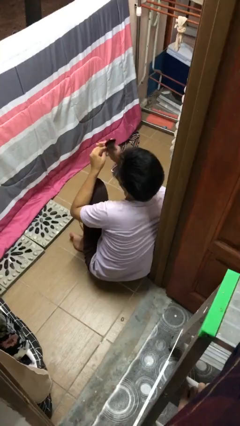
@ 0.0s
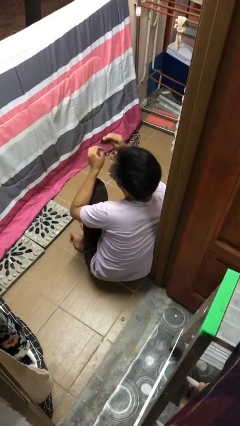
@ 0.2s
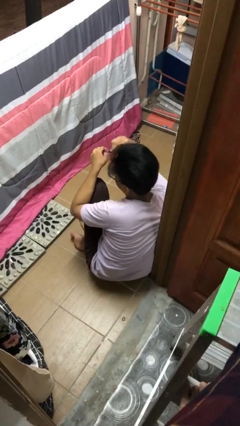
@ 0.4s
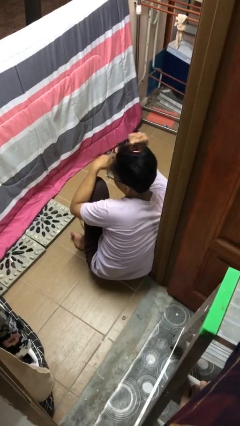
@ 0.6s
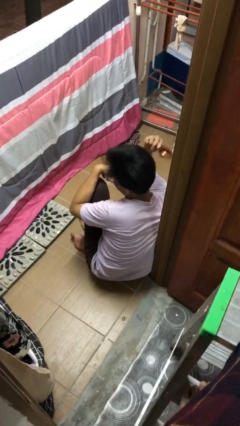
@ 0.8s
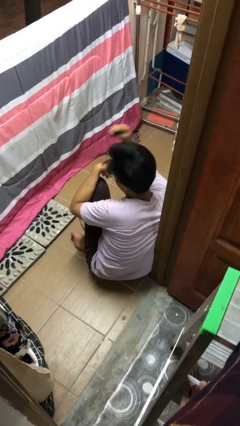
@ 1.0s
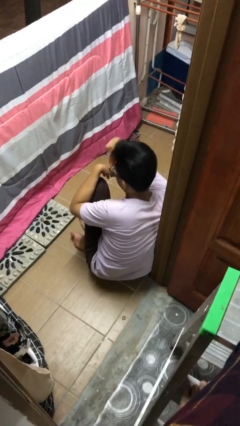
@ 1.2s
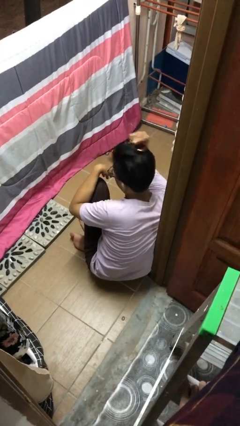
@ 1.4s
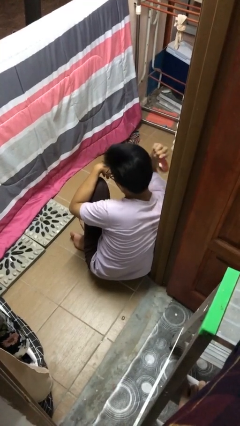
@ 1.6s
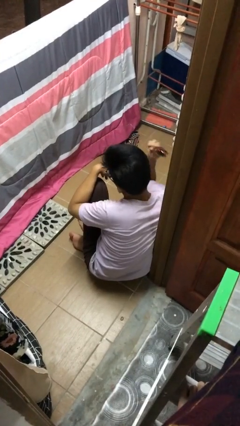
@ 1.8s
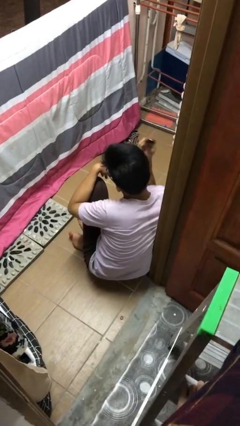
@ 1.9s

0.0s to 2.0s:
person brushes hair

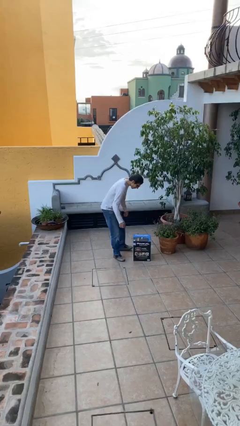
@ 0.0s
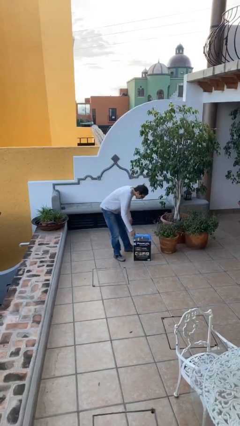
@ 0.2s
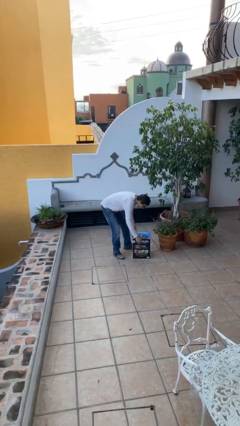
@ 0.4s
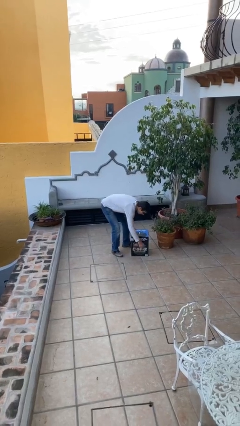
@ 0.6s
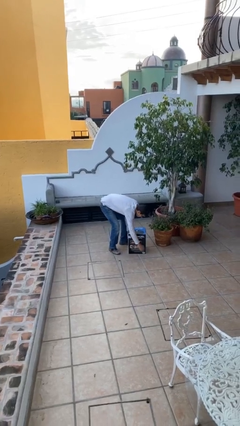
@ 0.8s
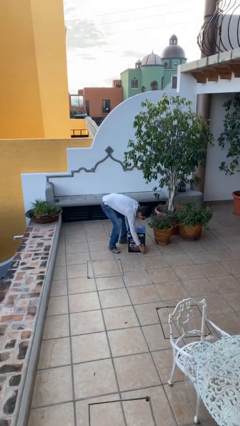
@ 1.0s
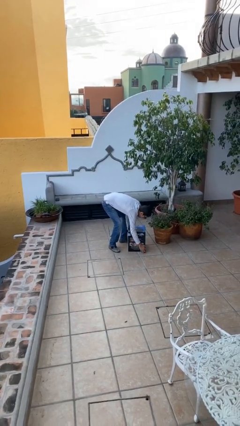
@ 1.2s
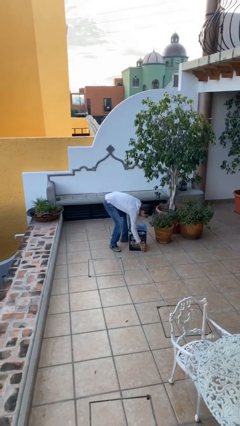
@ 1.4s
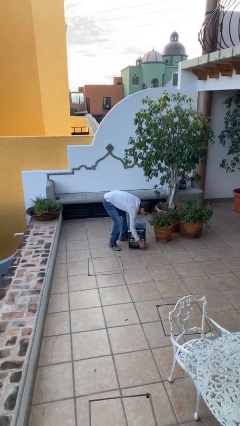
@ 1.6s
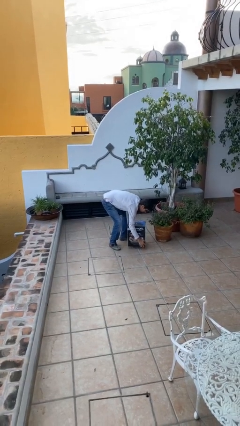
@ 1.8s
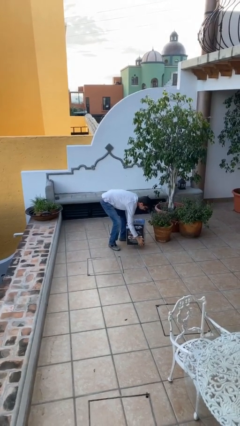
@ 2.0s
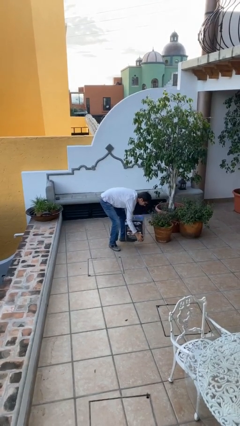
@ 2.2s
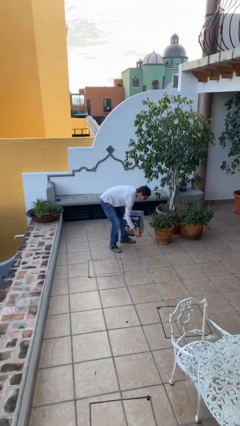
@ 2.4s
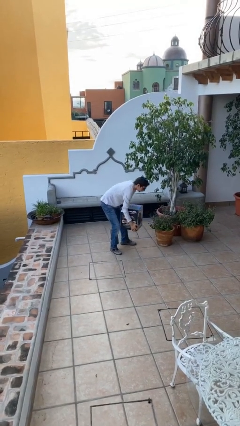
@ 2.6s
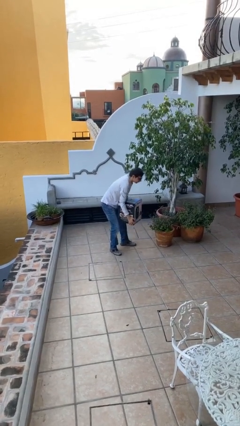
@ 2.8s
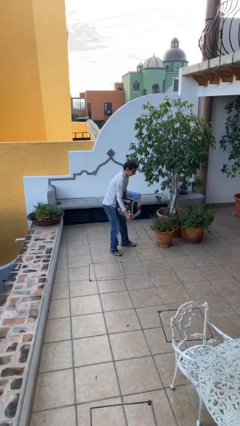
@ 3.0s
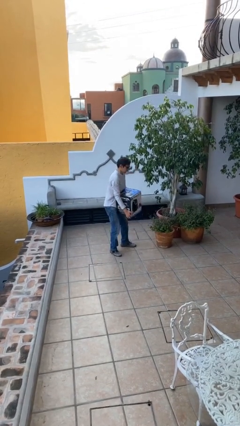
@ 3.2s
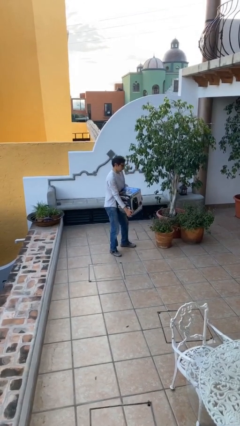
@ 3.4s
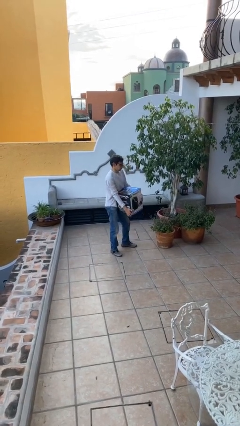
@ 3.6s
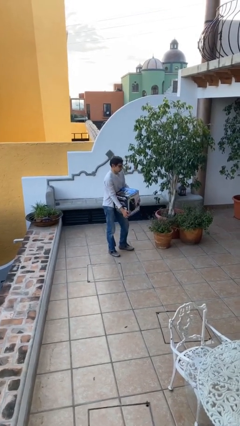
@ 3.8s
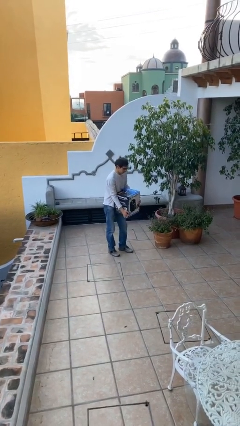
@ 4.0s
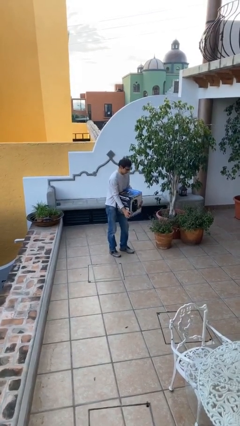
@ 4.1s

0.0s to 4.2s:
person picks up object from floor

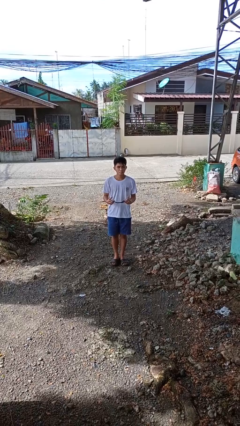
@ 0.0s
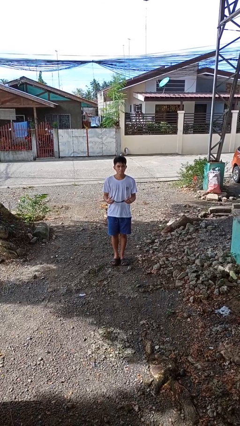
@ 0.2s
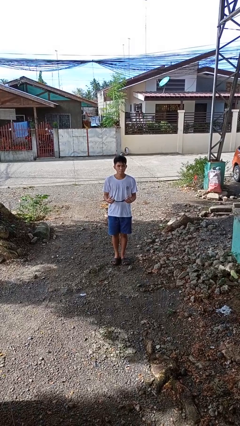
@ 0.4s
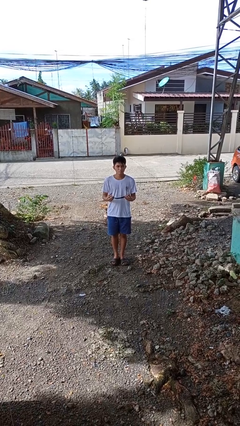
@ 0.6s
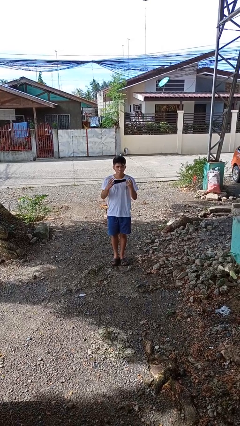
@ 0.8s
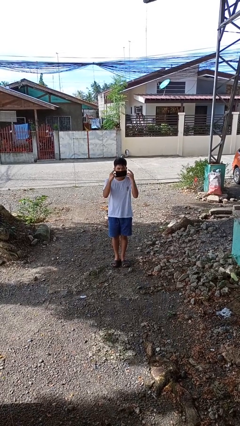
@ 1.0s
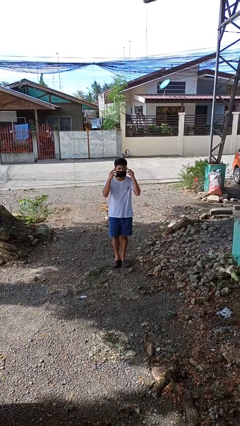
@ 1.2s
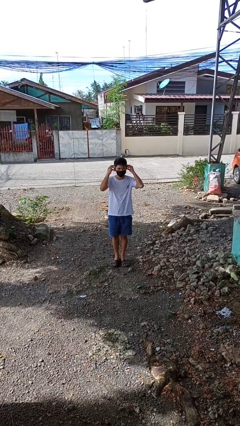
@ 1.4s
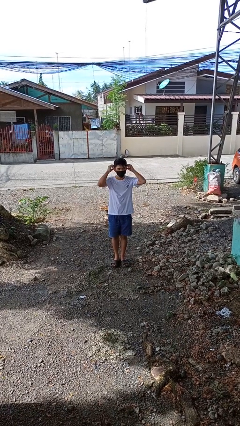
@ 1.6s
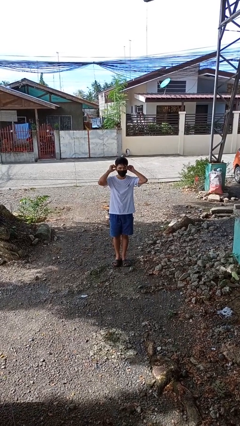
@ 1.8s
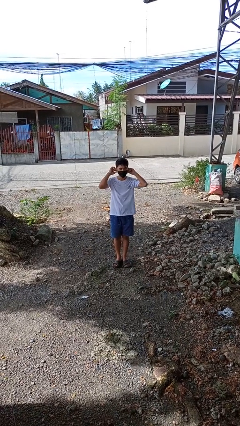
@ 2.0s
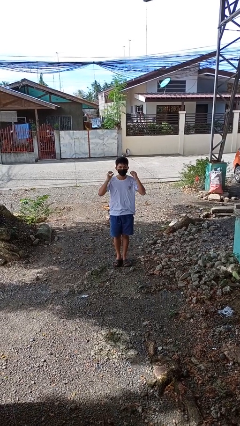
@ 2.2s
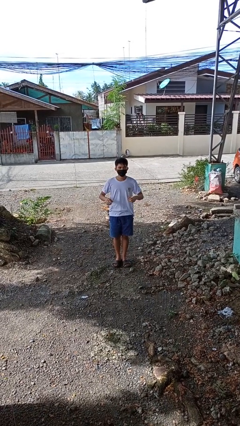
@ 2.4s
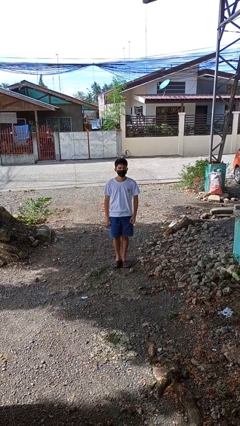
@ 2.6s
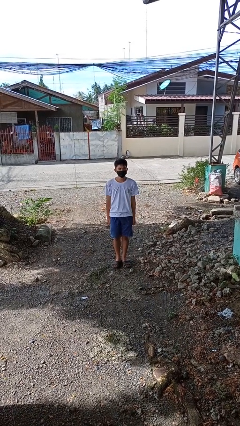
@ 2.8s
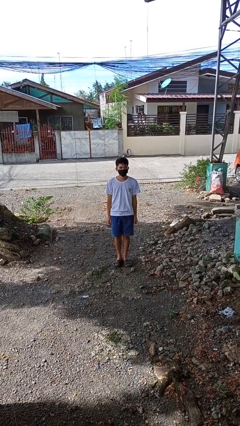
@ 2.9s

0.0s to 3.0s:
person puts on facemask

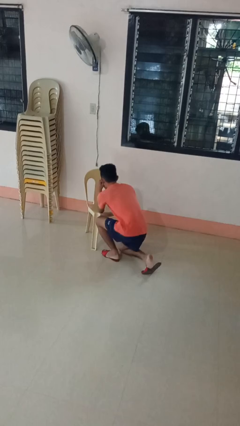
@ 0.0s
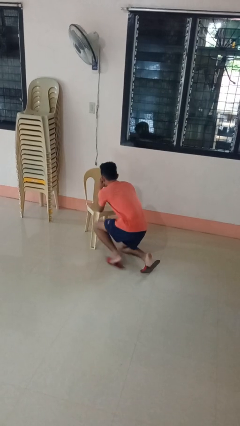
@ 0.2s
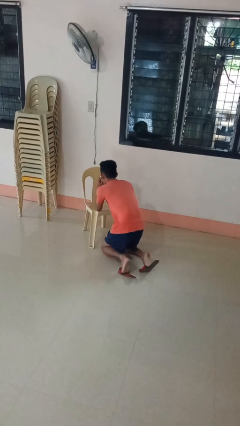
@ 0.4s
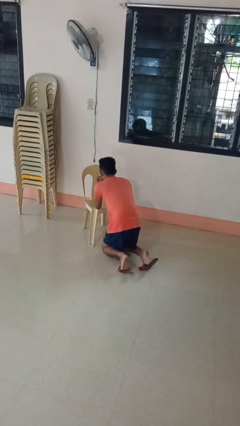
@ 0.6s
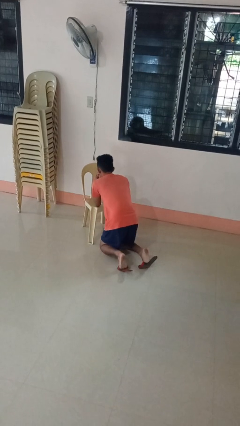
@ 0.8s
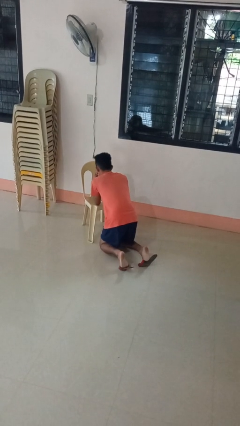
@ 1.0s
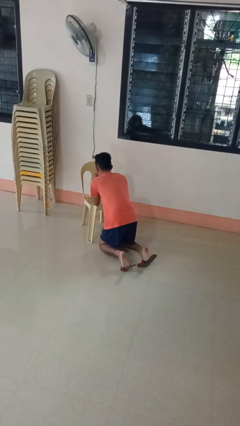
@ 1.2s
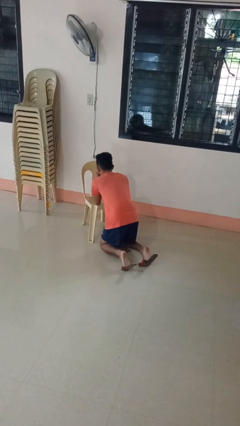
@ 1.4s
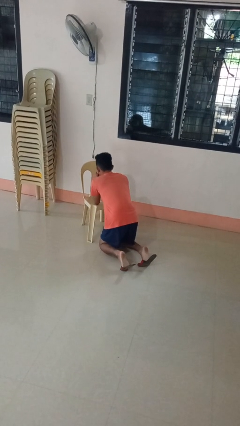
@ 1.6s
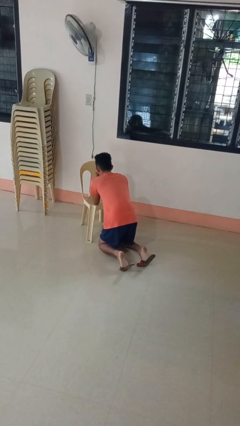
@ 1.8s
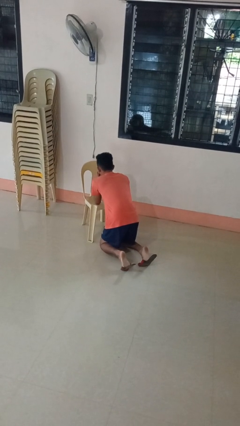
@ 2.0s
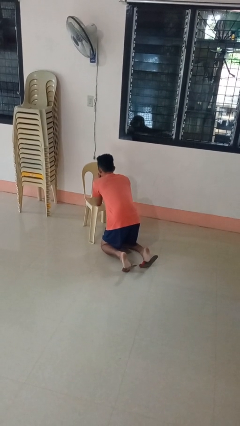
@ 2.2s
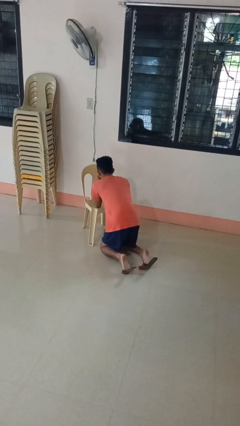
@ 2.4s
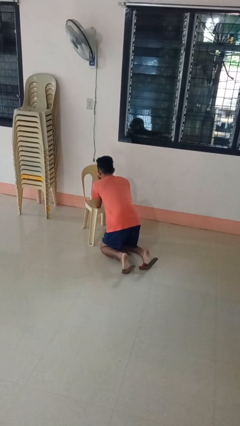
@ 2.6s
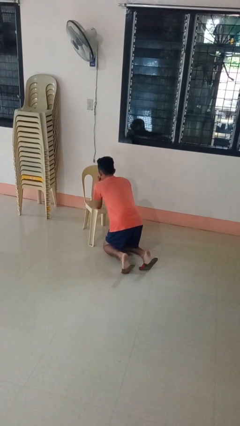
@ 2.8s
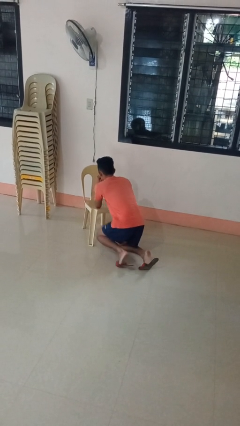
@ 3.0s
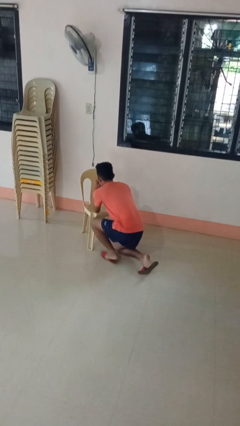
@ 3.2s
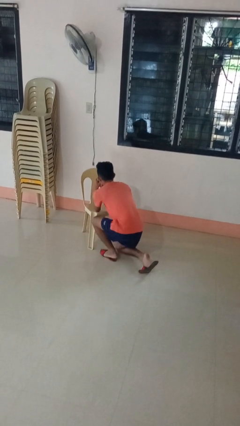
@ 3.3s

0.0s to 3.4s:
person prays

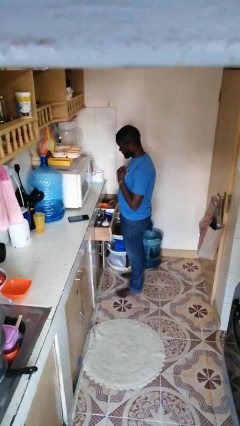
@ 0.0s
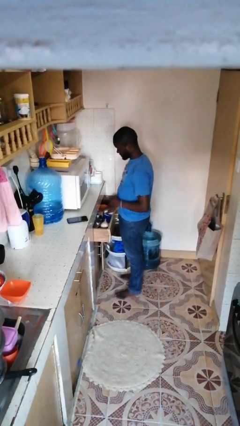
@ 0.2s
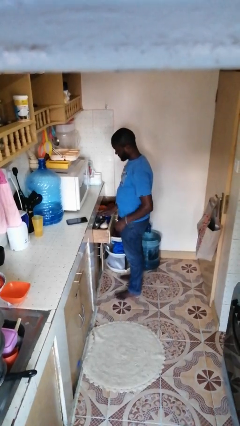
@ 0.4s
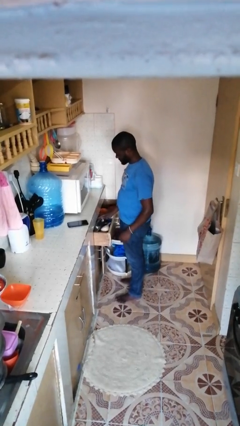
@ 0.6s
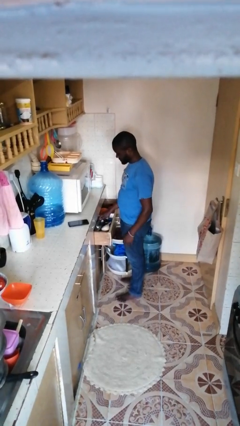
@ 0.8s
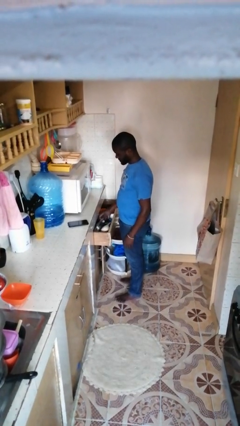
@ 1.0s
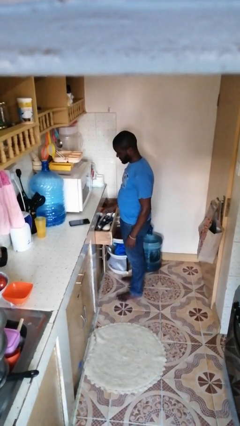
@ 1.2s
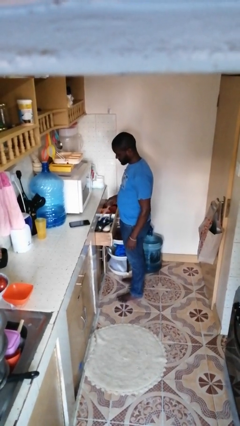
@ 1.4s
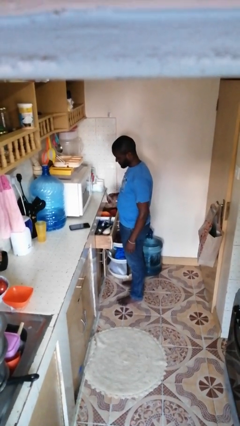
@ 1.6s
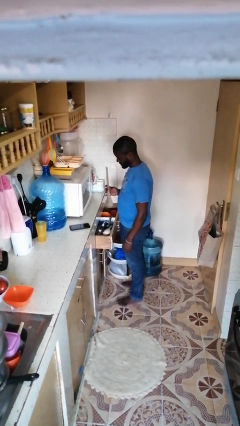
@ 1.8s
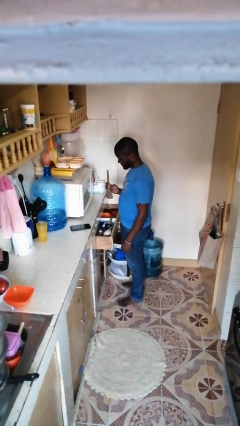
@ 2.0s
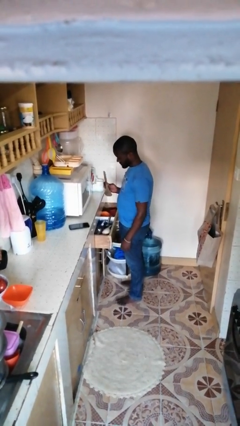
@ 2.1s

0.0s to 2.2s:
person takes object from kitchen drawer

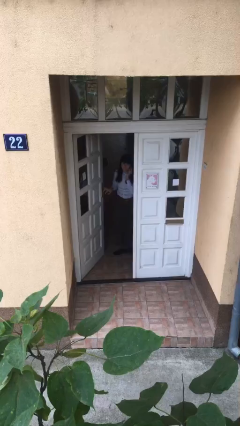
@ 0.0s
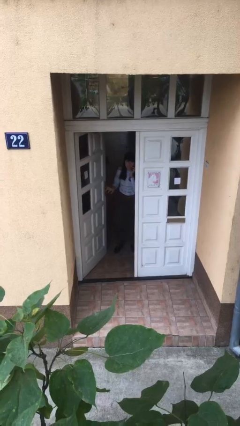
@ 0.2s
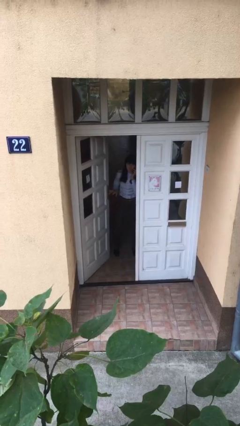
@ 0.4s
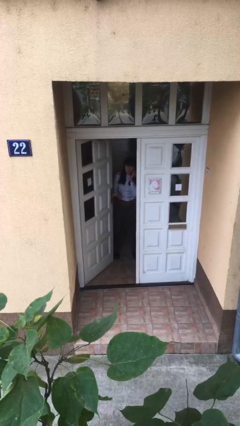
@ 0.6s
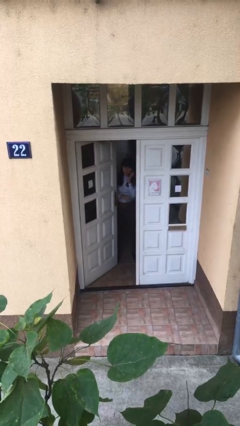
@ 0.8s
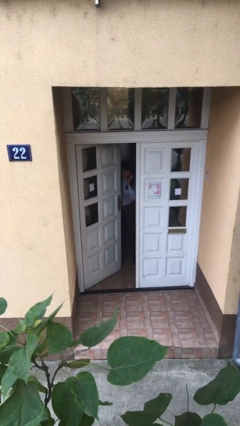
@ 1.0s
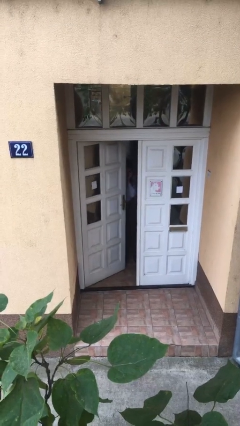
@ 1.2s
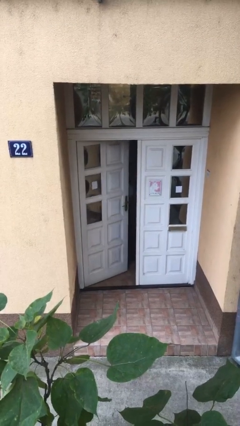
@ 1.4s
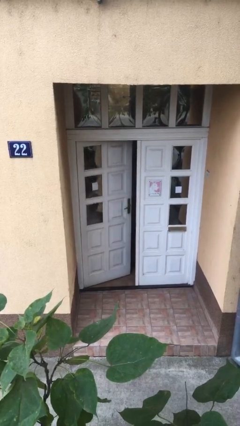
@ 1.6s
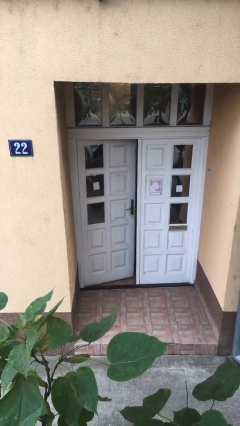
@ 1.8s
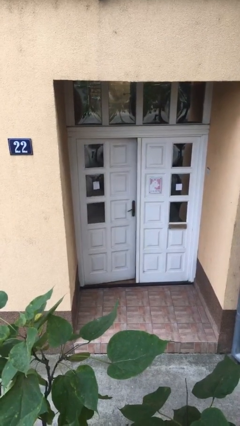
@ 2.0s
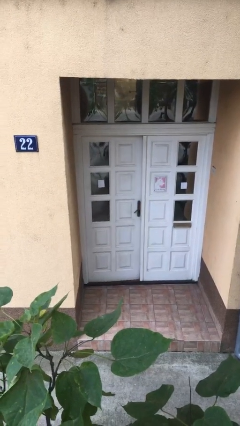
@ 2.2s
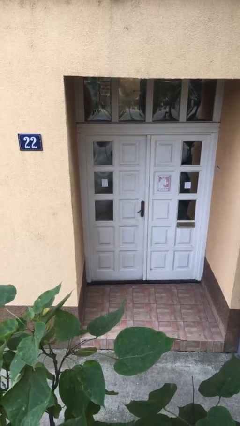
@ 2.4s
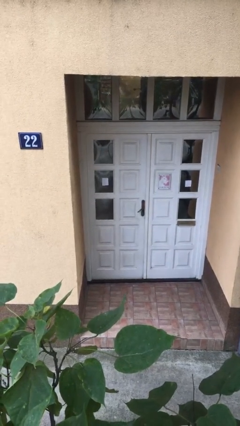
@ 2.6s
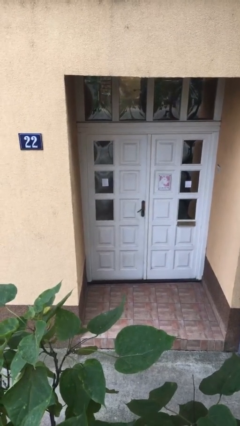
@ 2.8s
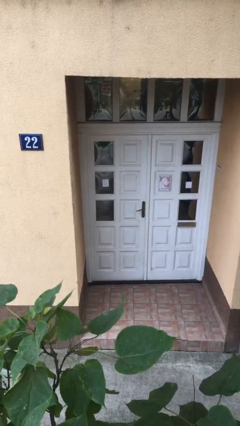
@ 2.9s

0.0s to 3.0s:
person closes facility door
